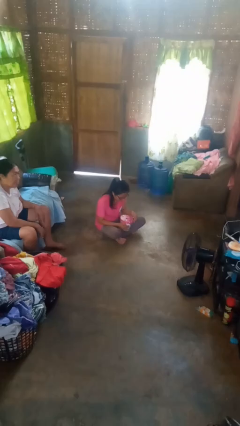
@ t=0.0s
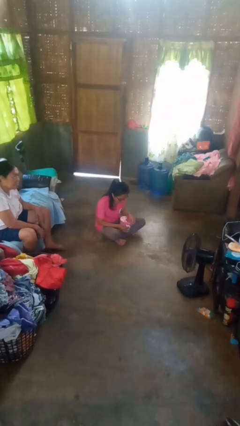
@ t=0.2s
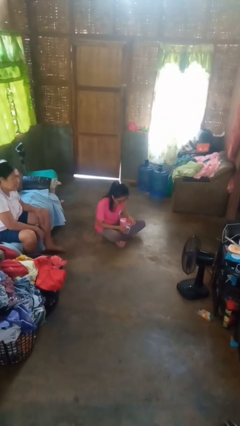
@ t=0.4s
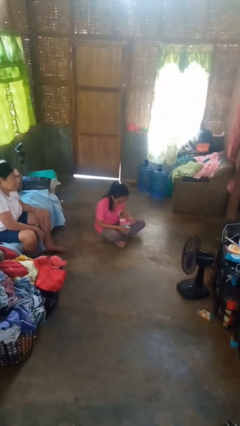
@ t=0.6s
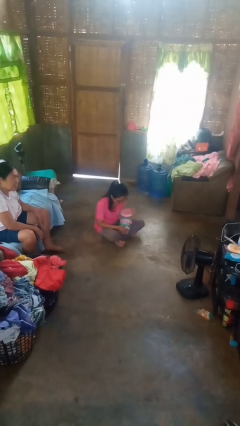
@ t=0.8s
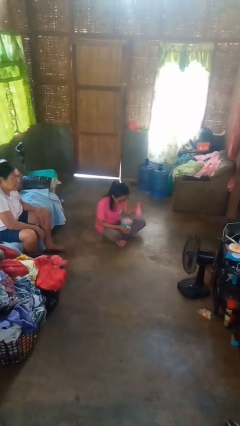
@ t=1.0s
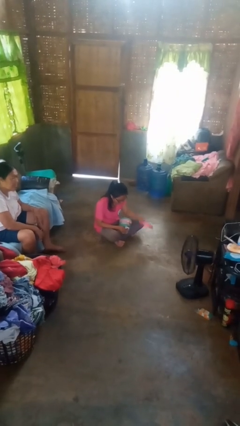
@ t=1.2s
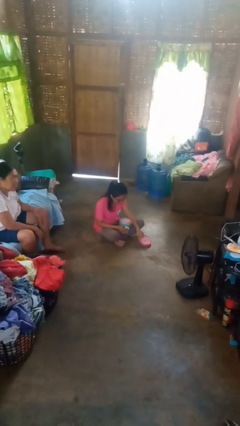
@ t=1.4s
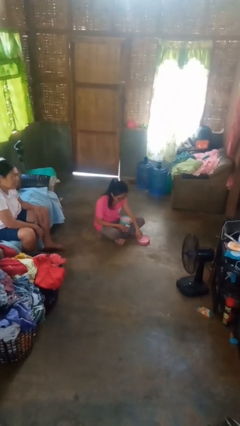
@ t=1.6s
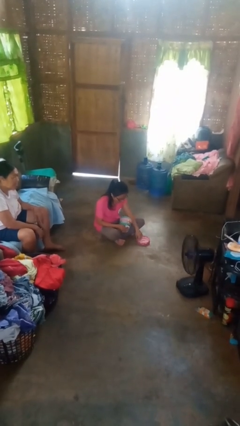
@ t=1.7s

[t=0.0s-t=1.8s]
person opens jewelry box

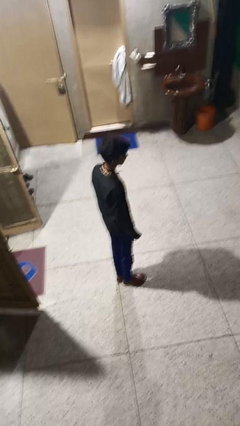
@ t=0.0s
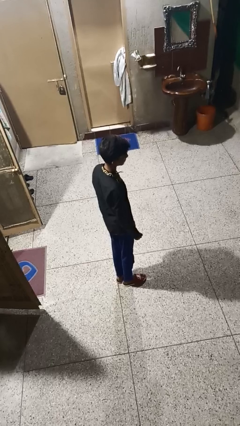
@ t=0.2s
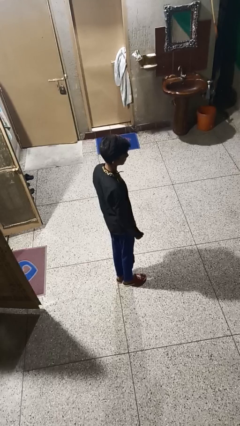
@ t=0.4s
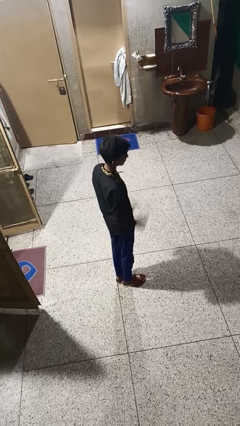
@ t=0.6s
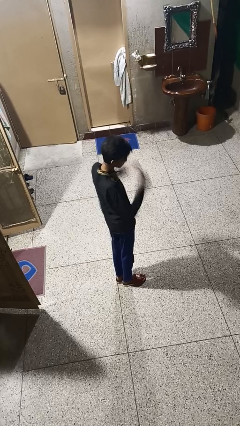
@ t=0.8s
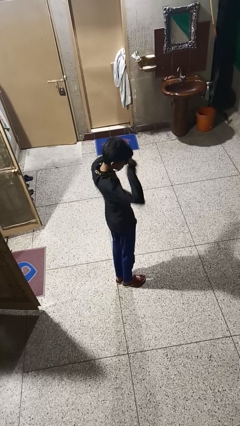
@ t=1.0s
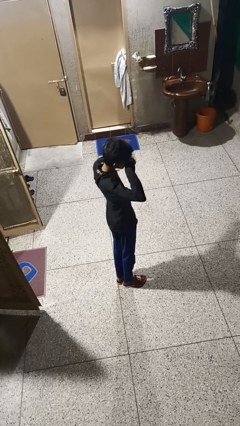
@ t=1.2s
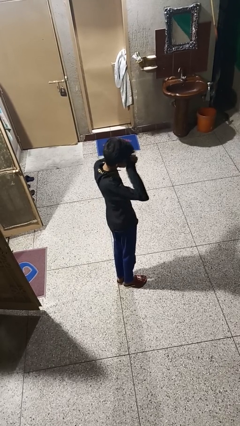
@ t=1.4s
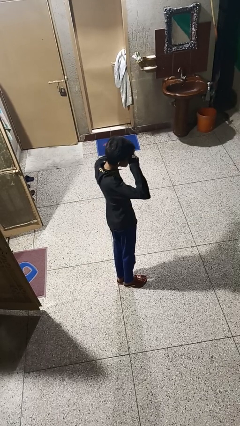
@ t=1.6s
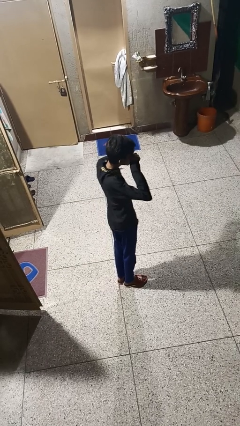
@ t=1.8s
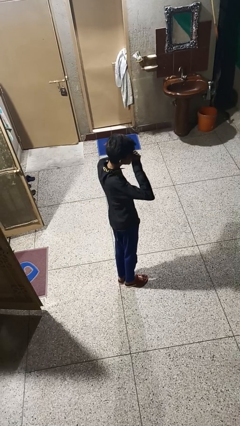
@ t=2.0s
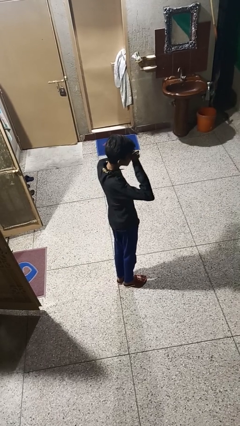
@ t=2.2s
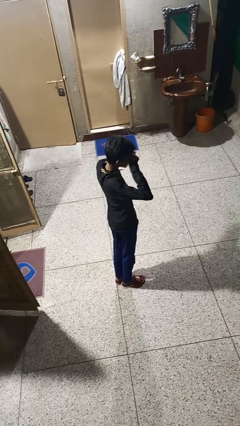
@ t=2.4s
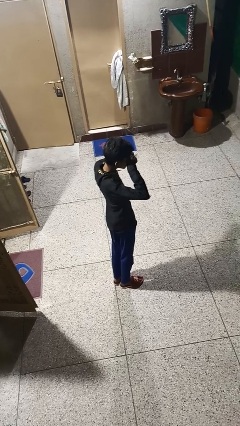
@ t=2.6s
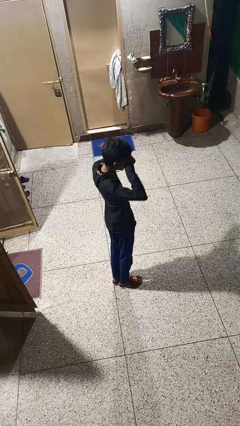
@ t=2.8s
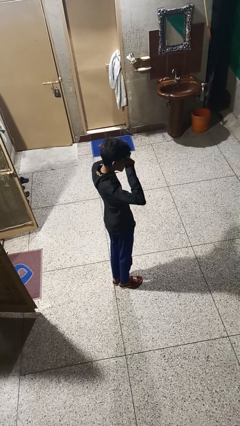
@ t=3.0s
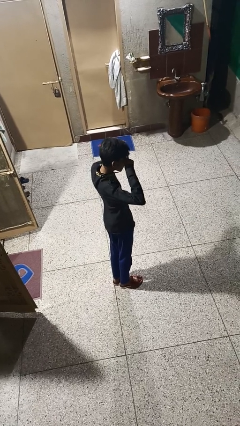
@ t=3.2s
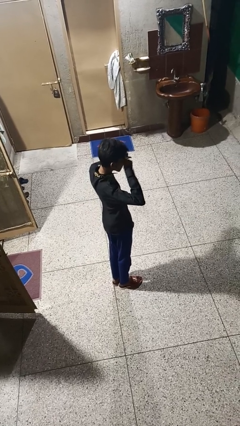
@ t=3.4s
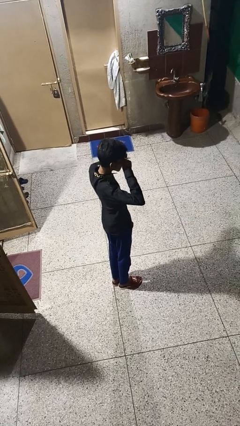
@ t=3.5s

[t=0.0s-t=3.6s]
person rubs eyes

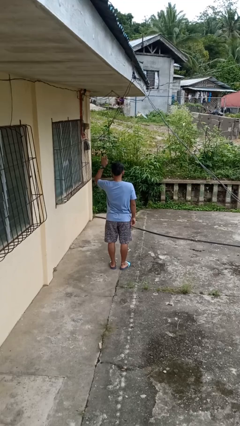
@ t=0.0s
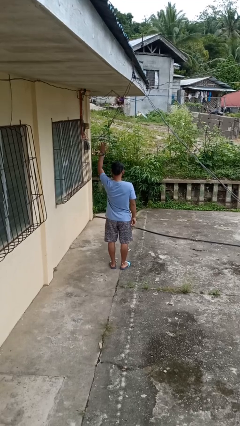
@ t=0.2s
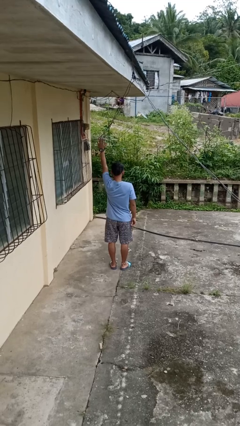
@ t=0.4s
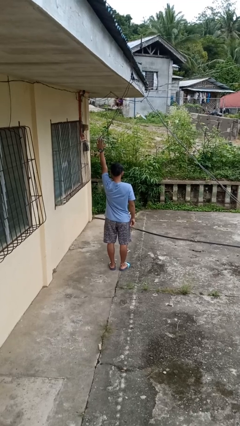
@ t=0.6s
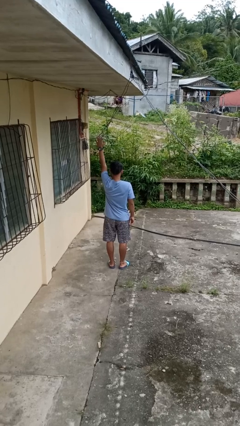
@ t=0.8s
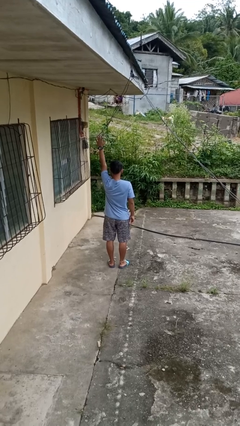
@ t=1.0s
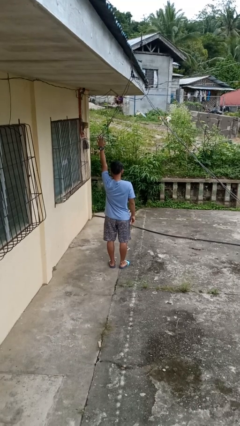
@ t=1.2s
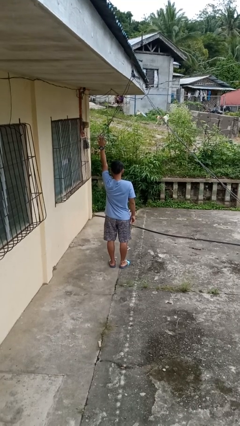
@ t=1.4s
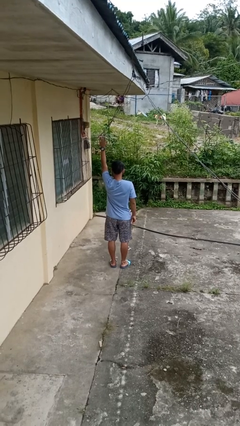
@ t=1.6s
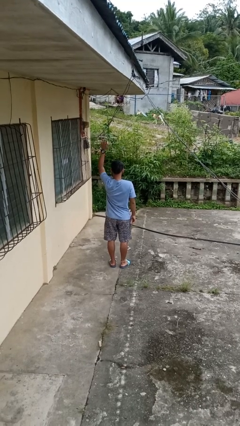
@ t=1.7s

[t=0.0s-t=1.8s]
person gestures raise hand

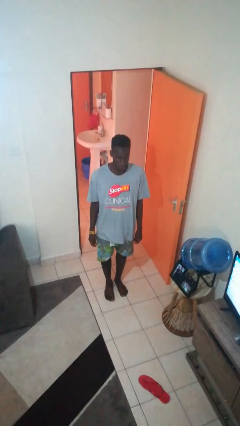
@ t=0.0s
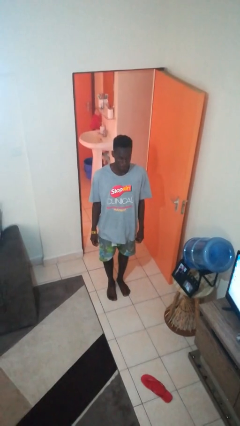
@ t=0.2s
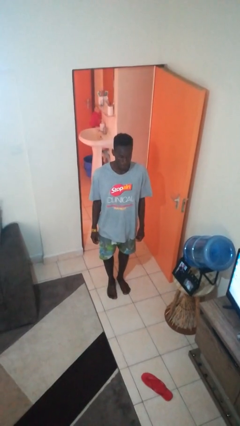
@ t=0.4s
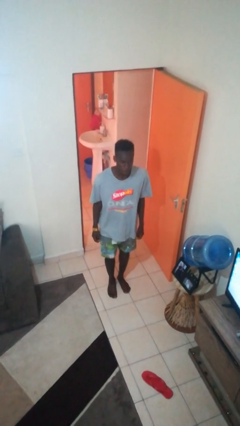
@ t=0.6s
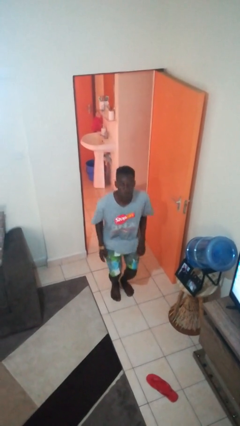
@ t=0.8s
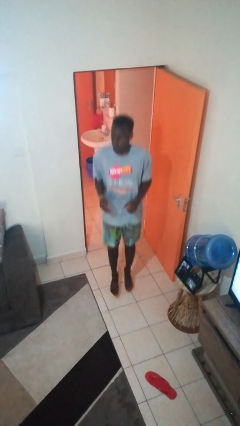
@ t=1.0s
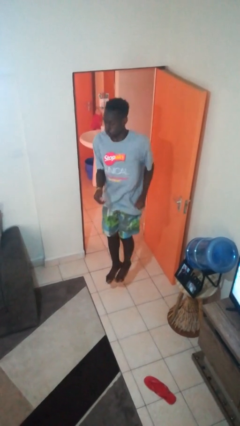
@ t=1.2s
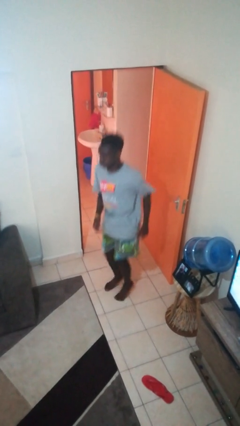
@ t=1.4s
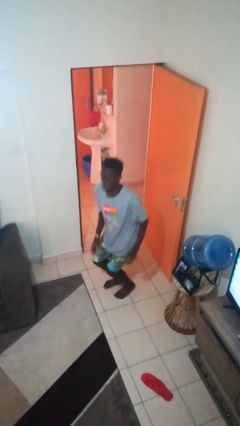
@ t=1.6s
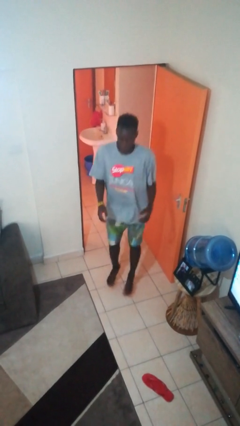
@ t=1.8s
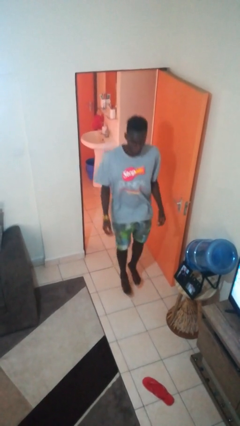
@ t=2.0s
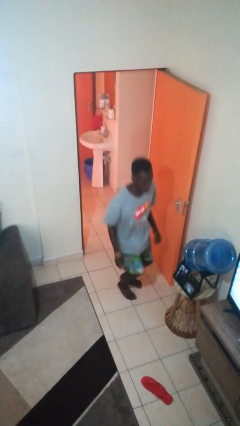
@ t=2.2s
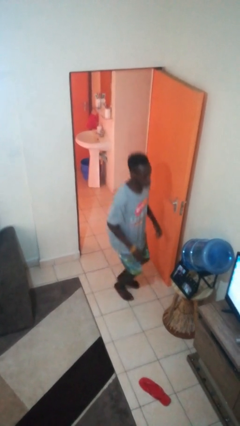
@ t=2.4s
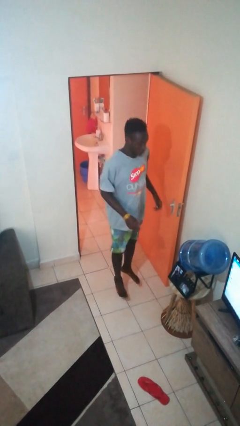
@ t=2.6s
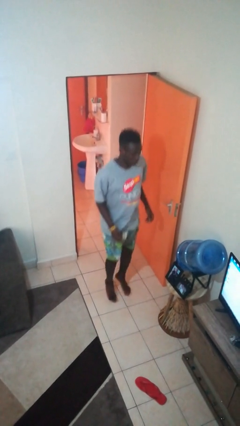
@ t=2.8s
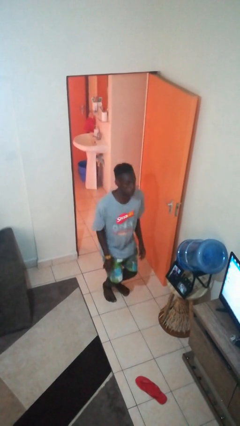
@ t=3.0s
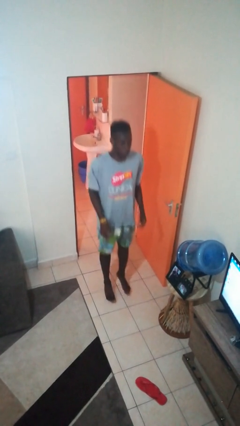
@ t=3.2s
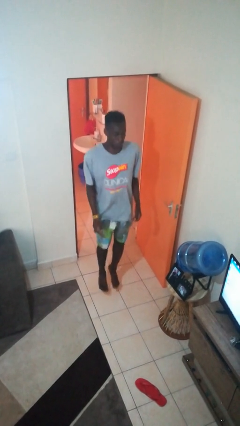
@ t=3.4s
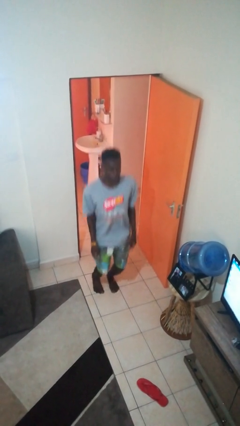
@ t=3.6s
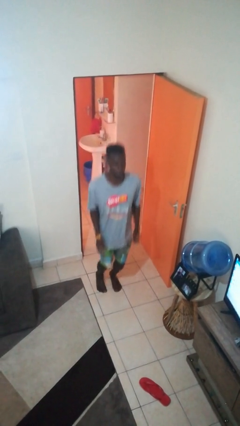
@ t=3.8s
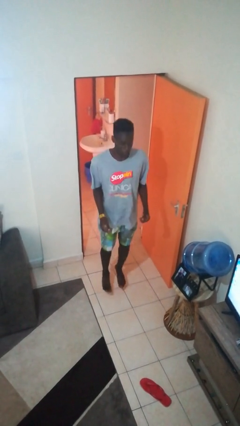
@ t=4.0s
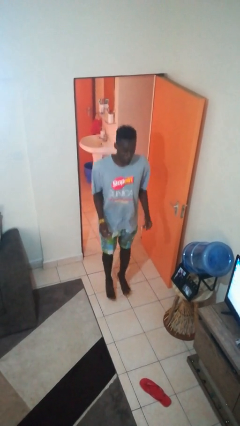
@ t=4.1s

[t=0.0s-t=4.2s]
person jumps

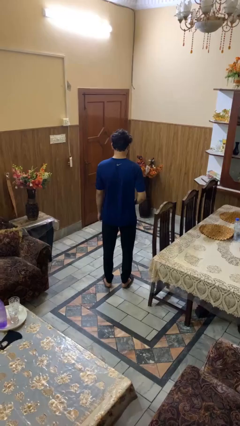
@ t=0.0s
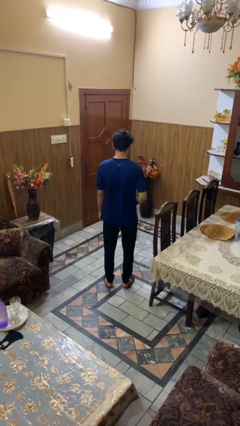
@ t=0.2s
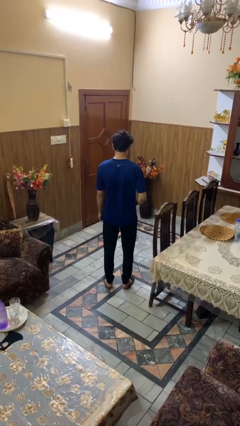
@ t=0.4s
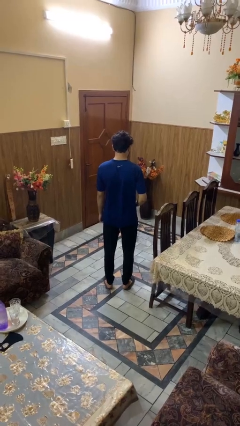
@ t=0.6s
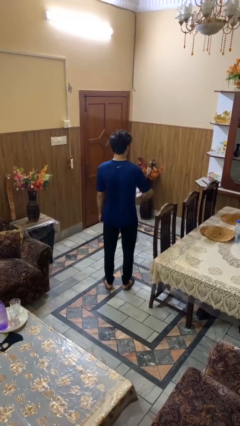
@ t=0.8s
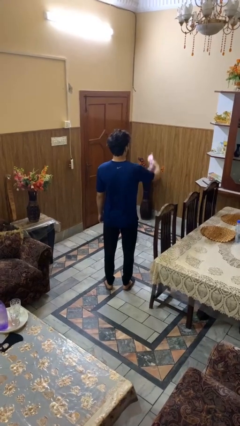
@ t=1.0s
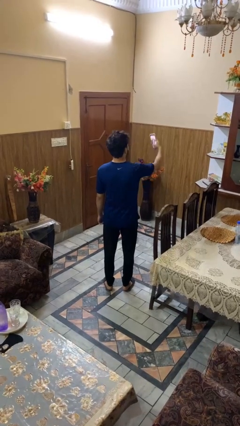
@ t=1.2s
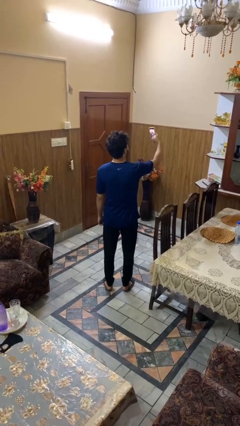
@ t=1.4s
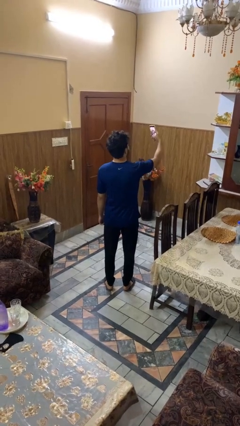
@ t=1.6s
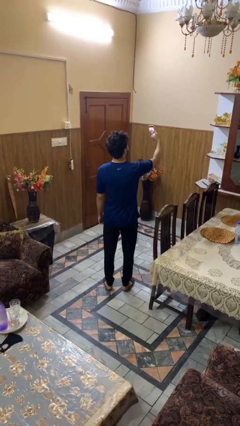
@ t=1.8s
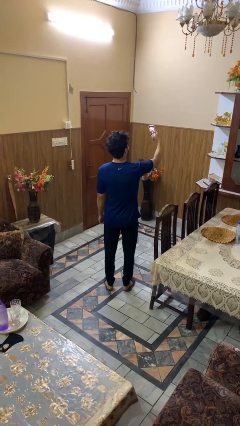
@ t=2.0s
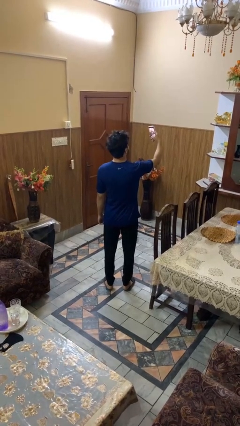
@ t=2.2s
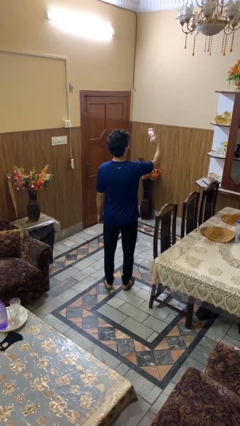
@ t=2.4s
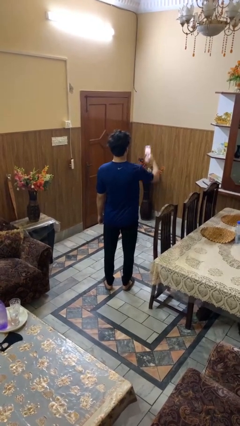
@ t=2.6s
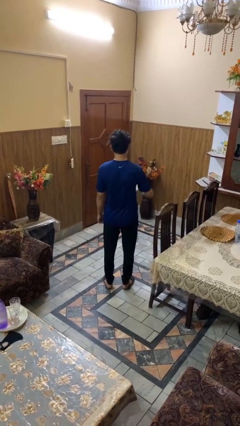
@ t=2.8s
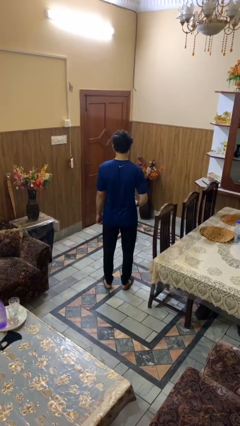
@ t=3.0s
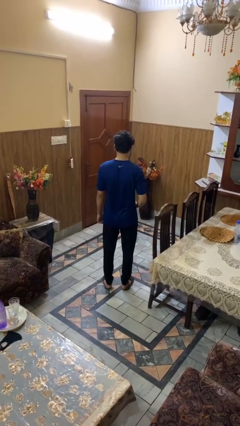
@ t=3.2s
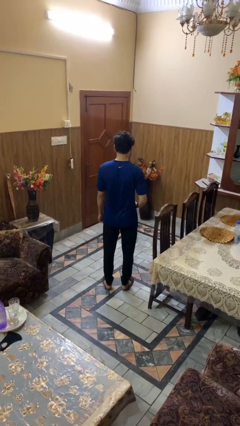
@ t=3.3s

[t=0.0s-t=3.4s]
person takes selfie

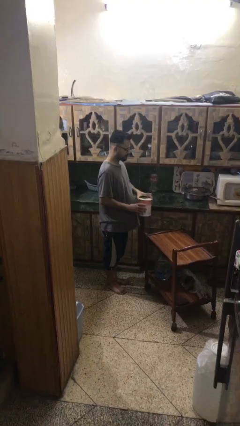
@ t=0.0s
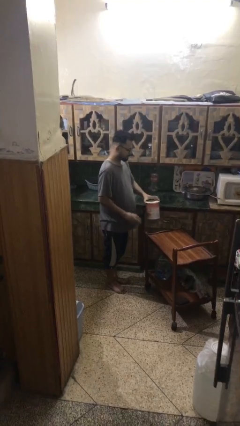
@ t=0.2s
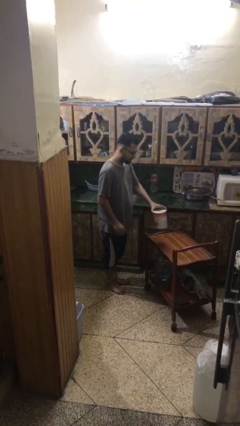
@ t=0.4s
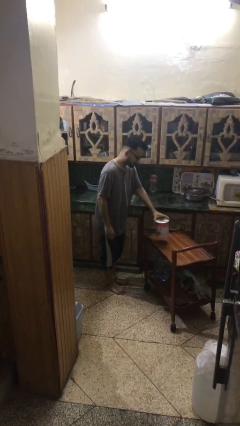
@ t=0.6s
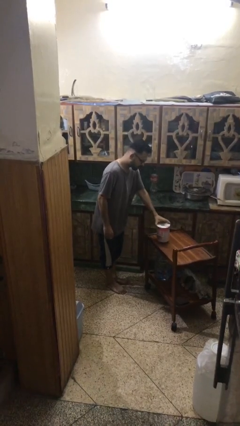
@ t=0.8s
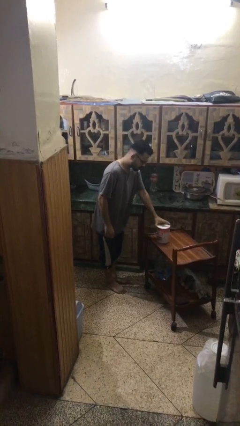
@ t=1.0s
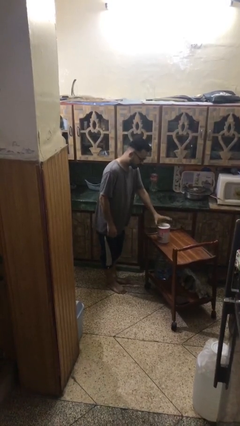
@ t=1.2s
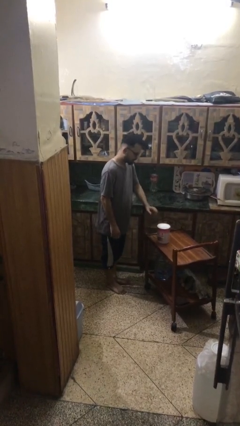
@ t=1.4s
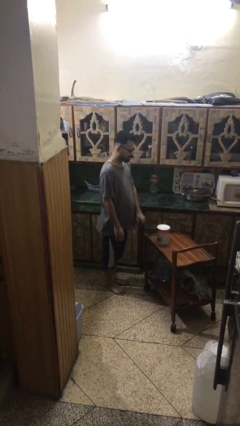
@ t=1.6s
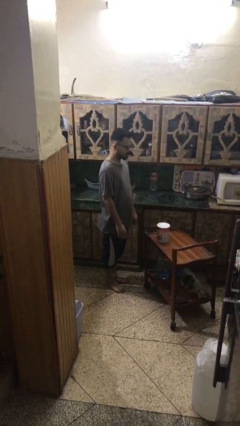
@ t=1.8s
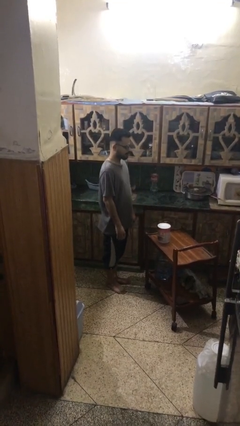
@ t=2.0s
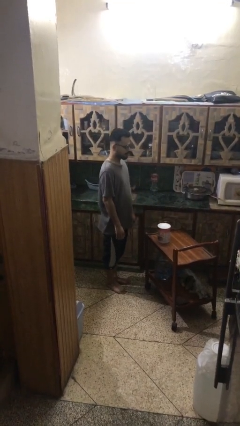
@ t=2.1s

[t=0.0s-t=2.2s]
person puts down object on table
